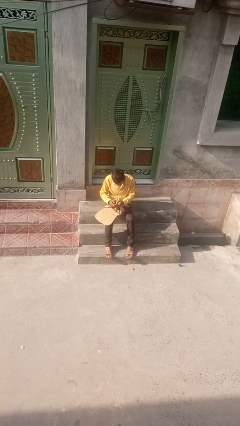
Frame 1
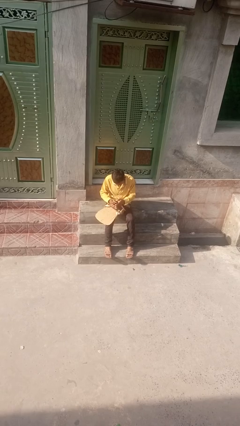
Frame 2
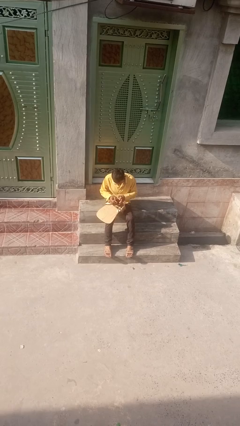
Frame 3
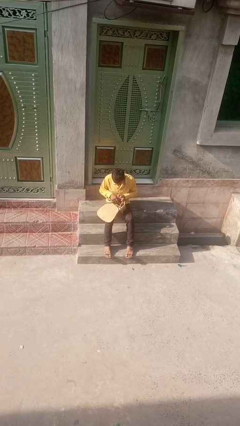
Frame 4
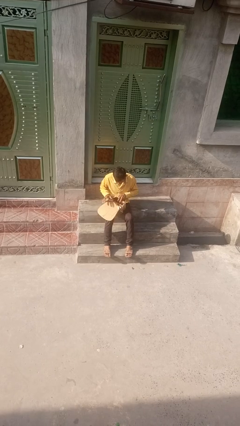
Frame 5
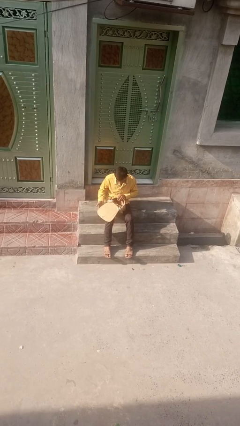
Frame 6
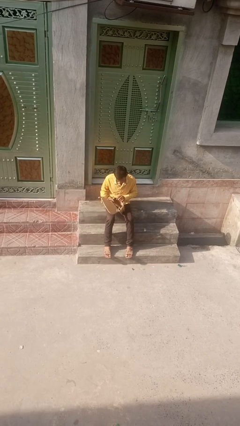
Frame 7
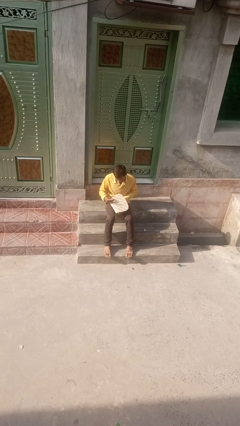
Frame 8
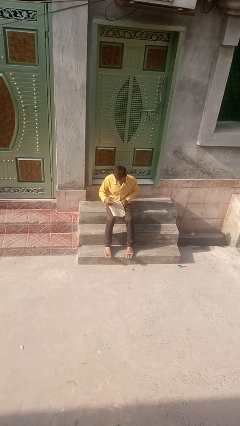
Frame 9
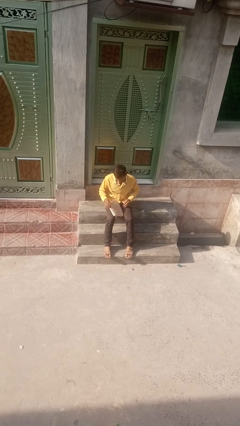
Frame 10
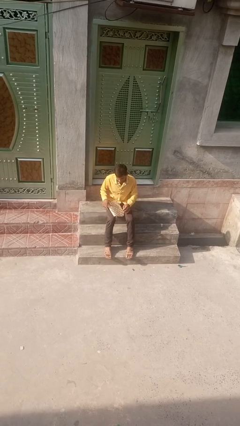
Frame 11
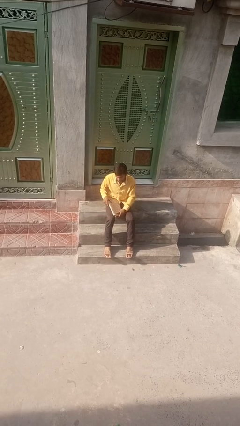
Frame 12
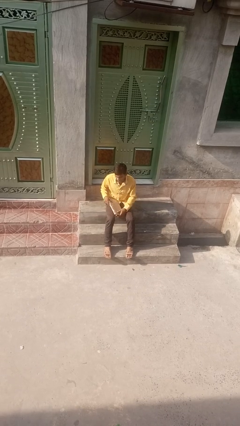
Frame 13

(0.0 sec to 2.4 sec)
person puts object into backpack

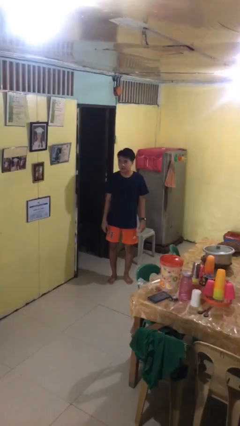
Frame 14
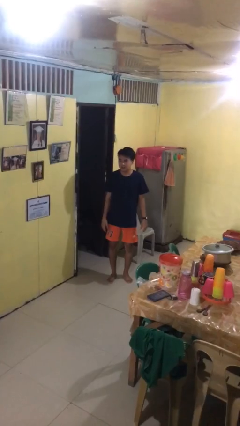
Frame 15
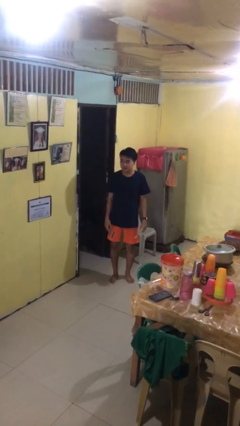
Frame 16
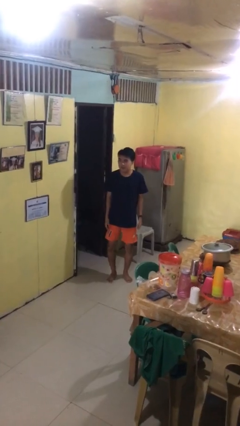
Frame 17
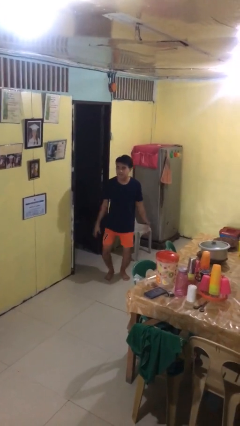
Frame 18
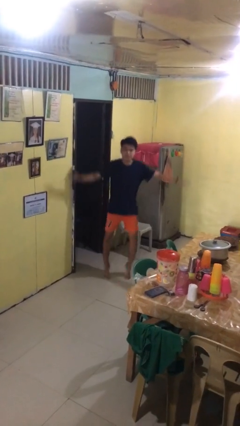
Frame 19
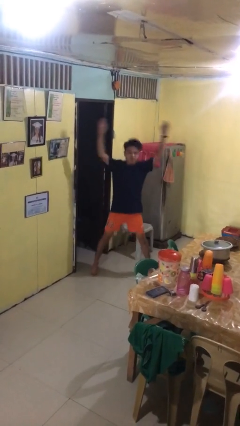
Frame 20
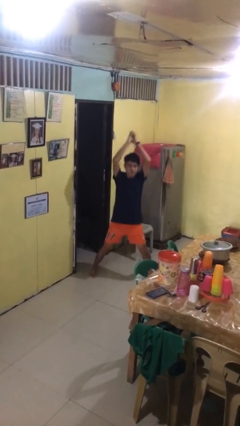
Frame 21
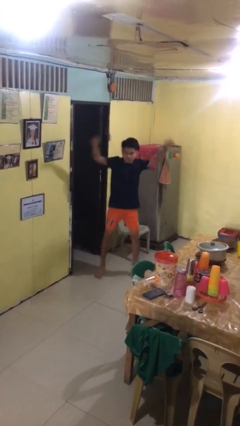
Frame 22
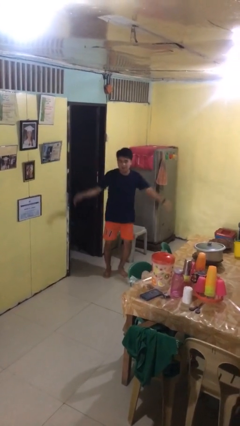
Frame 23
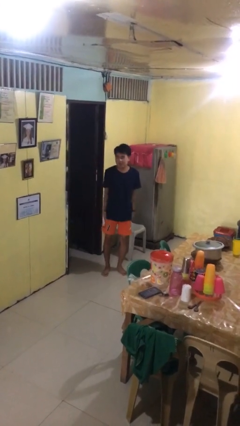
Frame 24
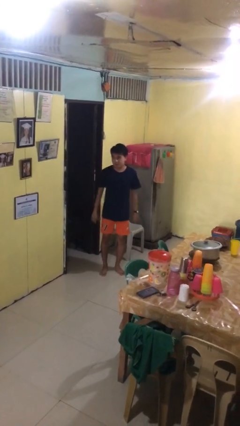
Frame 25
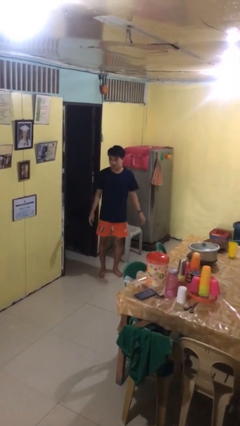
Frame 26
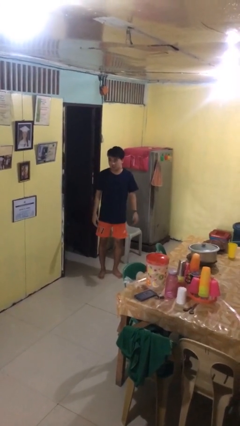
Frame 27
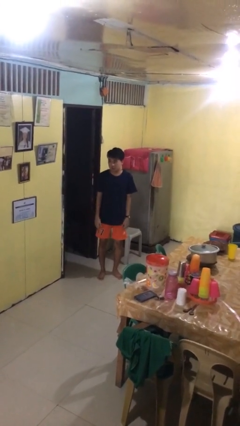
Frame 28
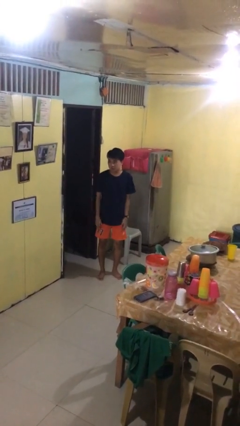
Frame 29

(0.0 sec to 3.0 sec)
person exercises with jumping jacks

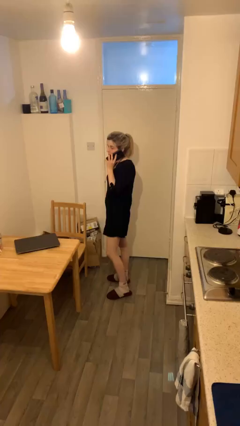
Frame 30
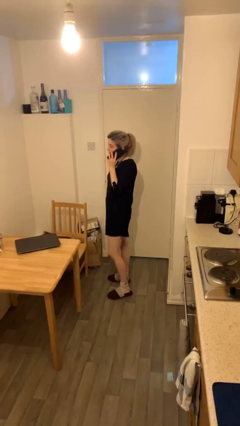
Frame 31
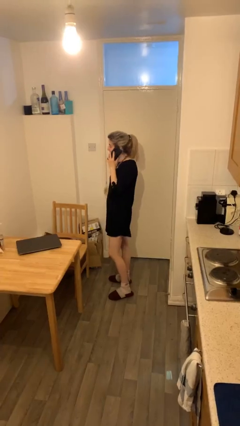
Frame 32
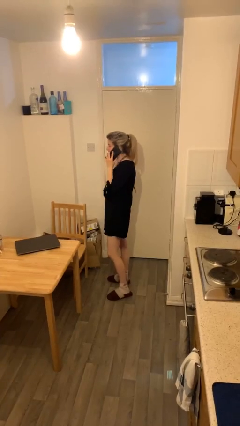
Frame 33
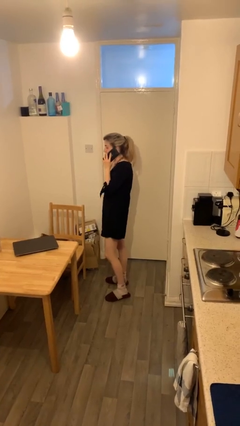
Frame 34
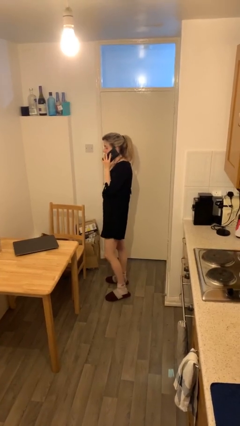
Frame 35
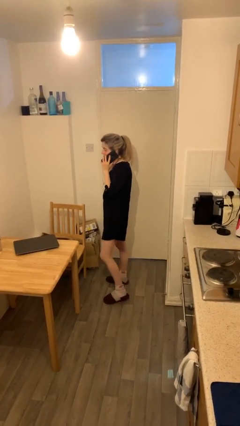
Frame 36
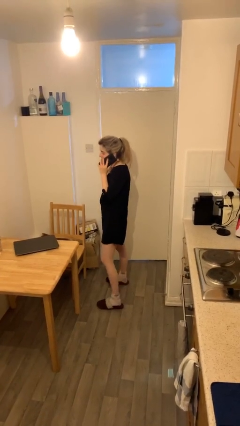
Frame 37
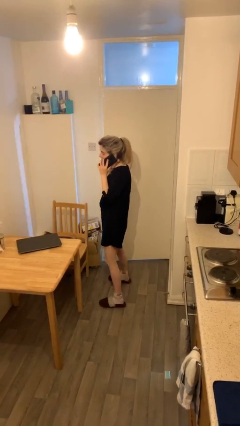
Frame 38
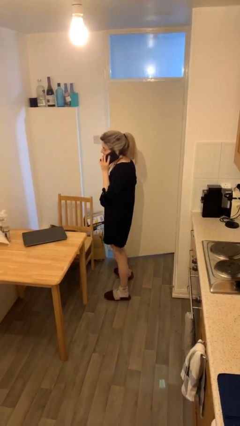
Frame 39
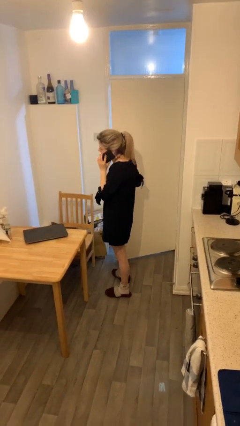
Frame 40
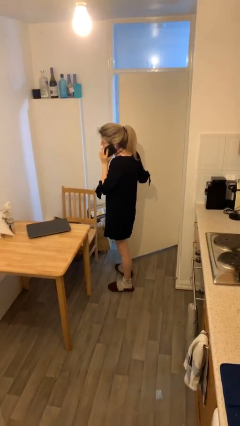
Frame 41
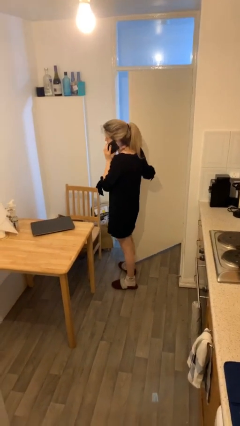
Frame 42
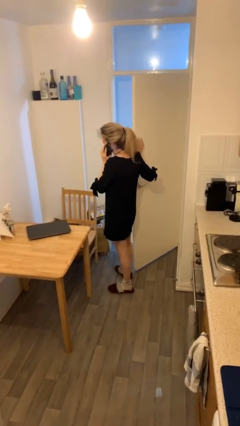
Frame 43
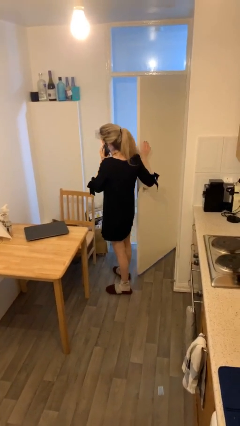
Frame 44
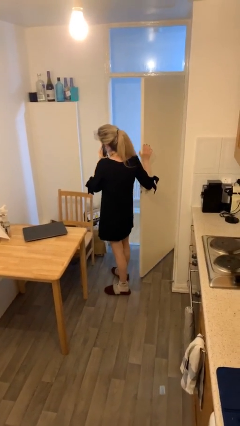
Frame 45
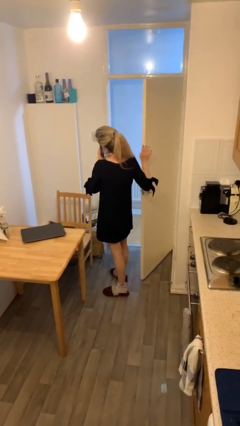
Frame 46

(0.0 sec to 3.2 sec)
person opens facility door

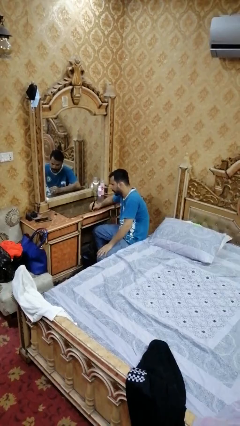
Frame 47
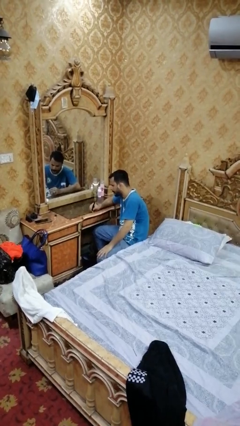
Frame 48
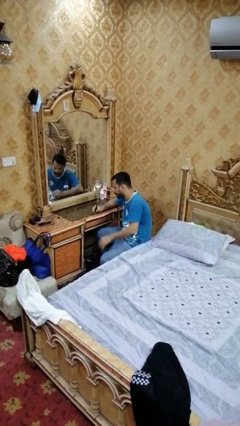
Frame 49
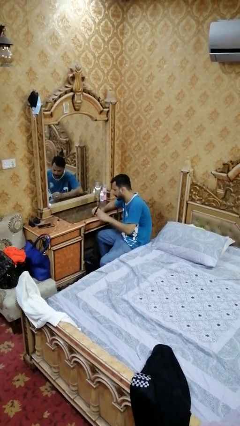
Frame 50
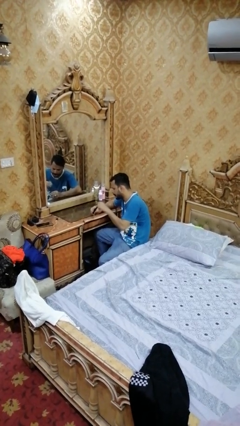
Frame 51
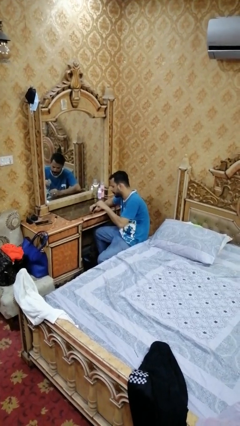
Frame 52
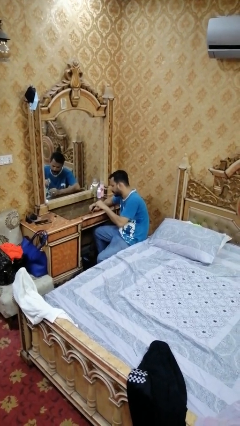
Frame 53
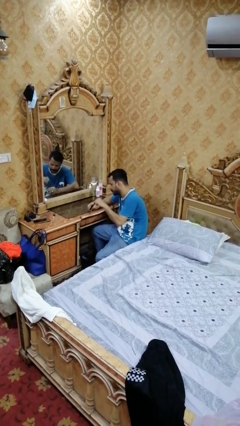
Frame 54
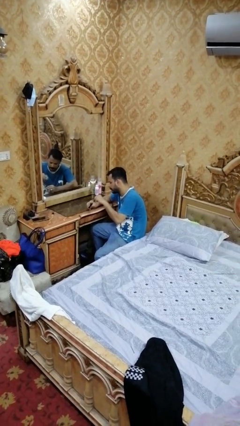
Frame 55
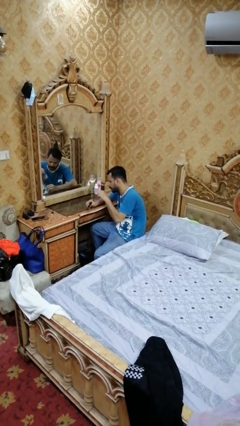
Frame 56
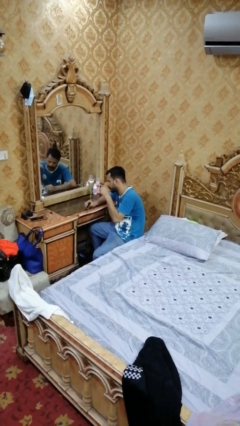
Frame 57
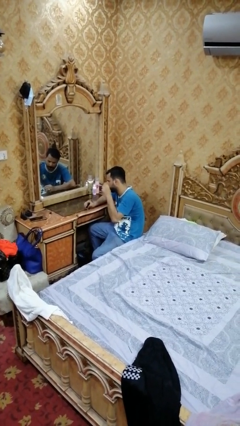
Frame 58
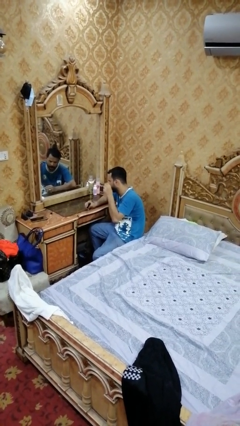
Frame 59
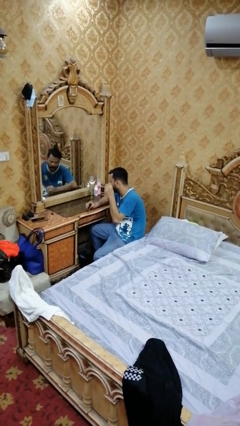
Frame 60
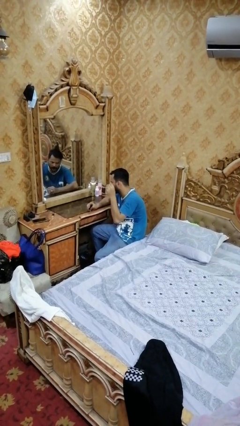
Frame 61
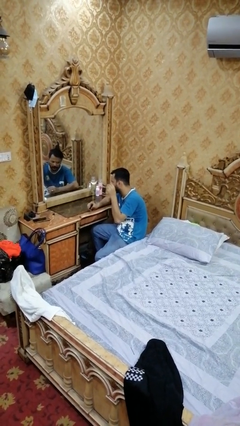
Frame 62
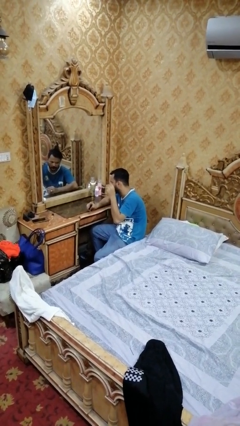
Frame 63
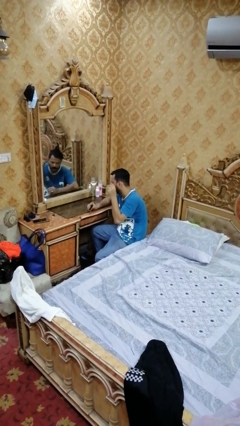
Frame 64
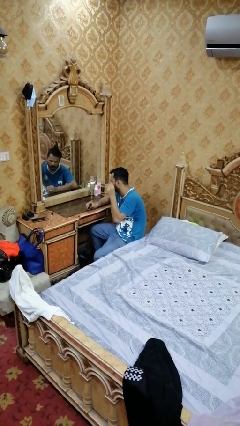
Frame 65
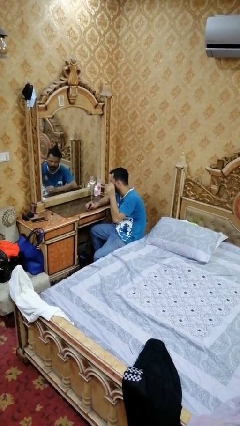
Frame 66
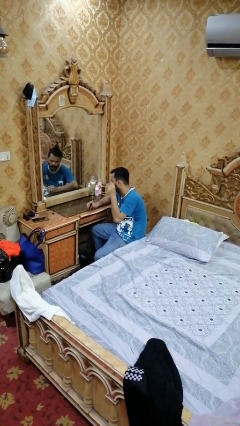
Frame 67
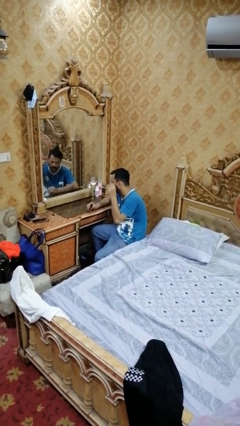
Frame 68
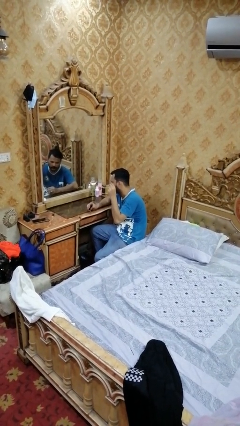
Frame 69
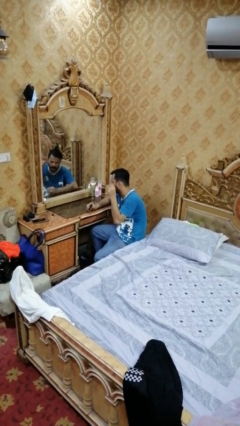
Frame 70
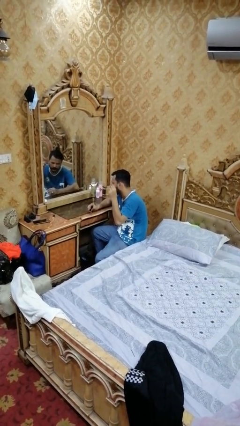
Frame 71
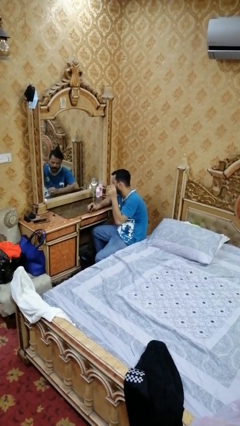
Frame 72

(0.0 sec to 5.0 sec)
person applies eye makeup

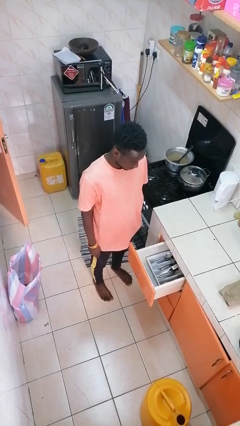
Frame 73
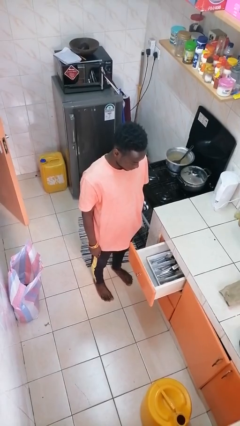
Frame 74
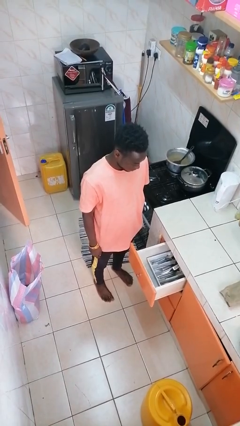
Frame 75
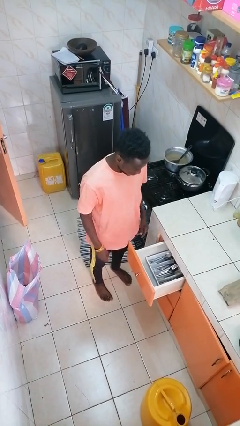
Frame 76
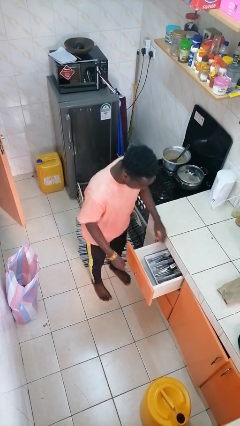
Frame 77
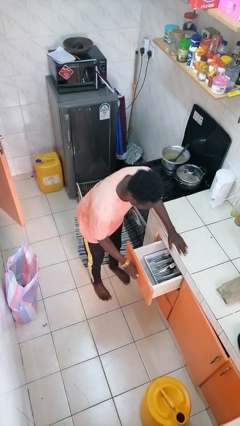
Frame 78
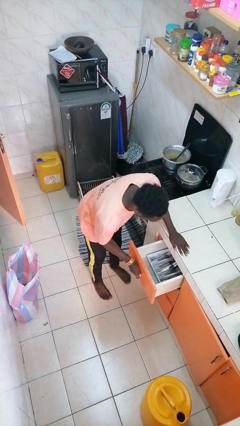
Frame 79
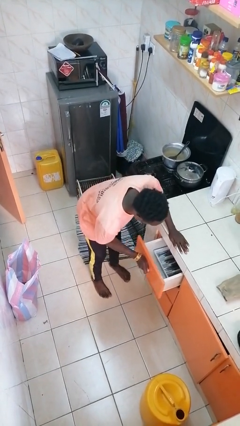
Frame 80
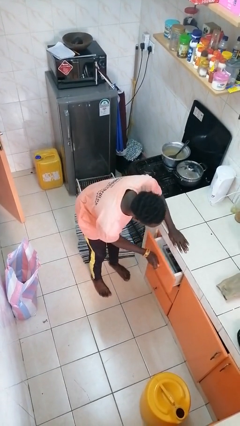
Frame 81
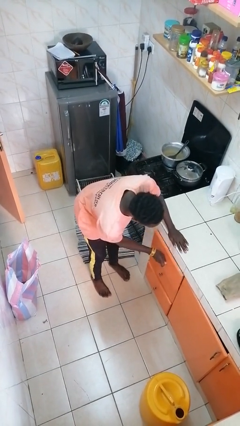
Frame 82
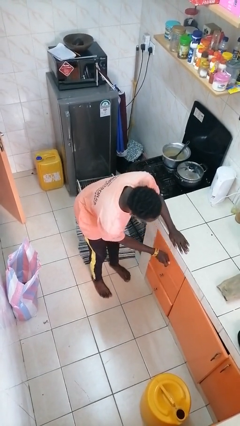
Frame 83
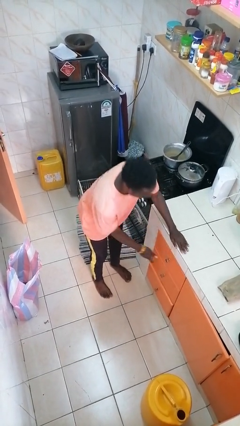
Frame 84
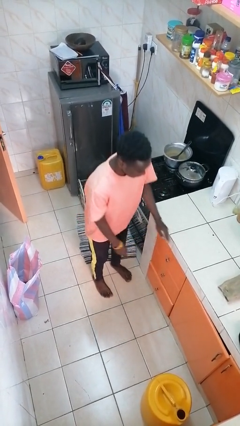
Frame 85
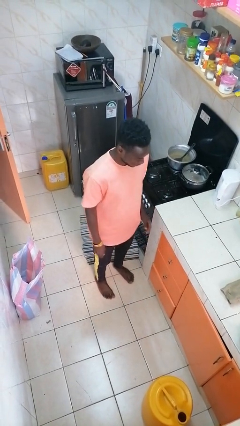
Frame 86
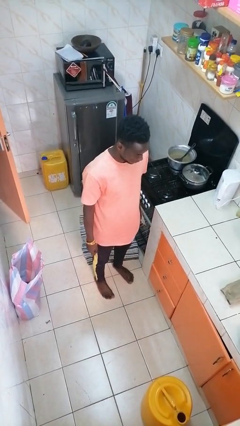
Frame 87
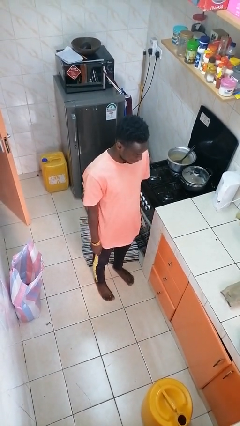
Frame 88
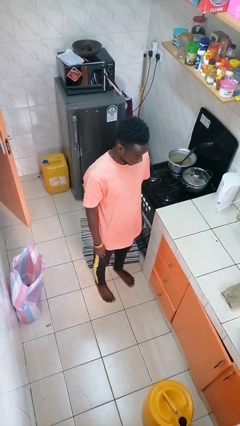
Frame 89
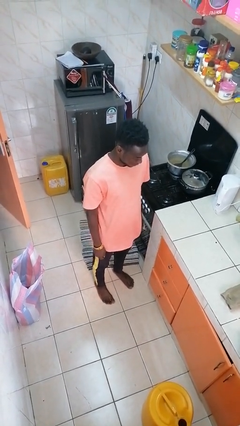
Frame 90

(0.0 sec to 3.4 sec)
person closes kitchen drawer

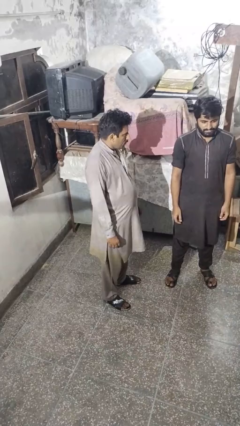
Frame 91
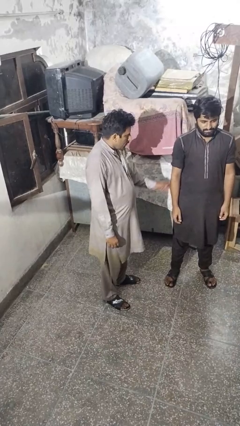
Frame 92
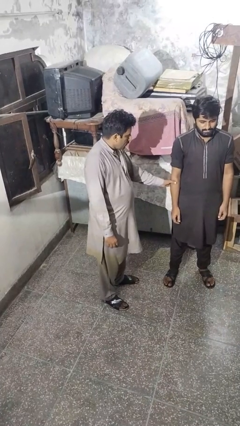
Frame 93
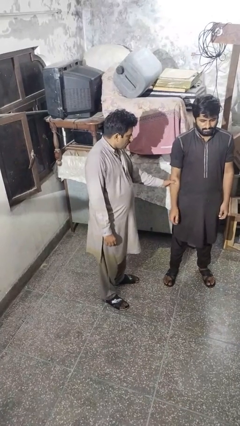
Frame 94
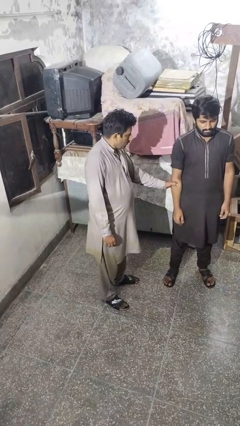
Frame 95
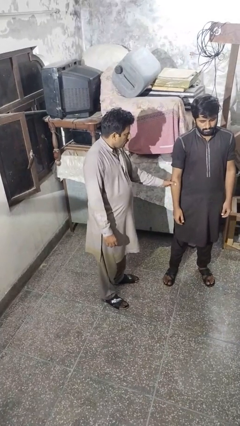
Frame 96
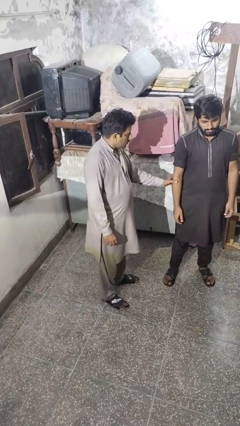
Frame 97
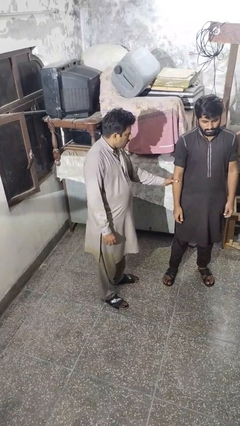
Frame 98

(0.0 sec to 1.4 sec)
person grabs person by forearm
